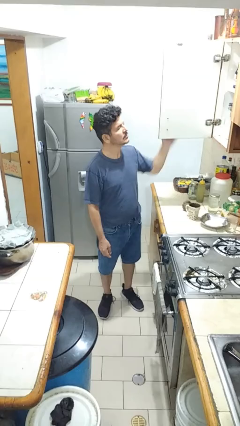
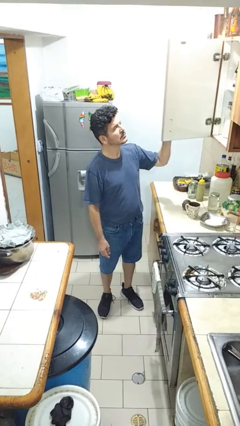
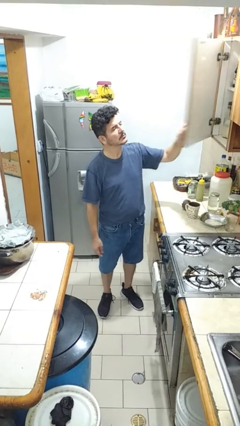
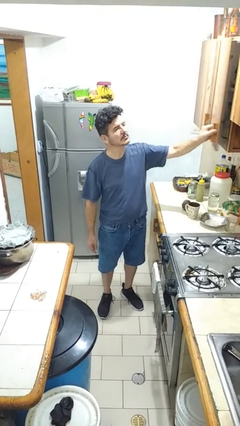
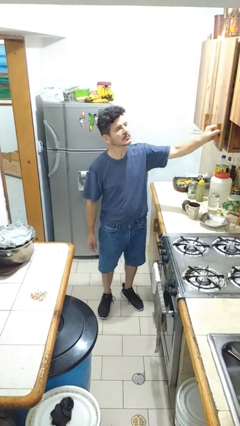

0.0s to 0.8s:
person closes cabinet

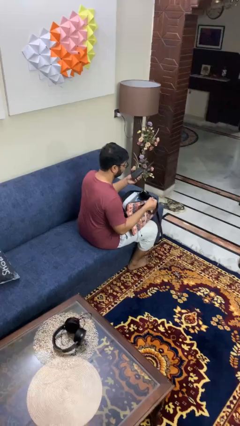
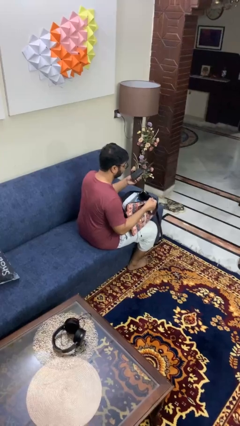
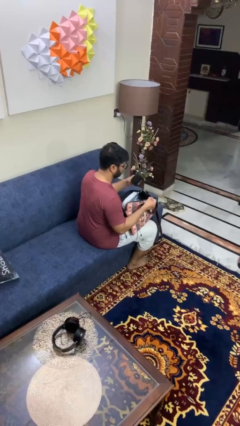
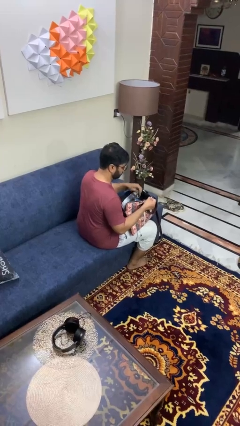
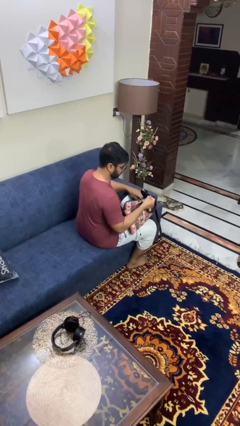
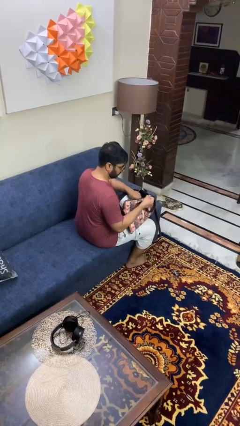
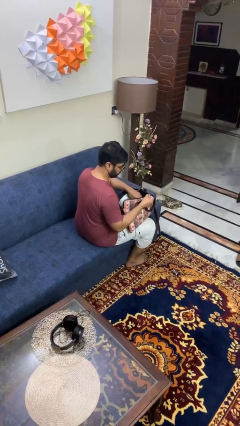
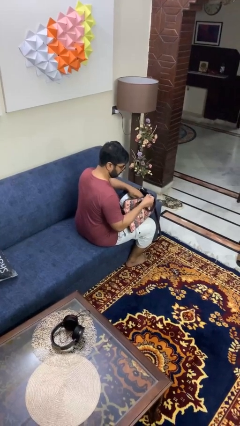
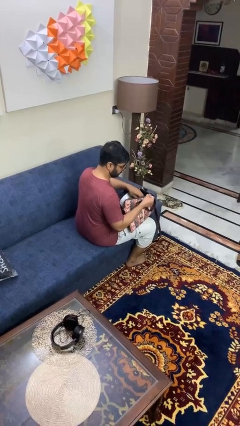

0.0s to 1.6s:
person puts object into purse

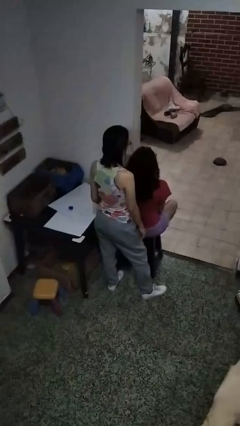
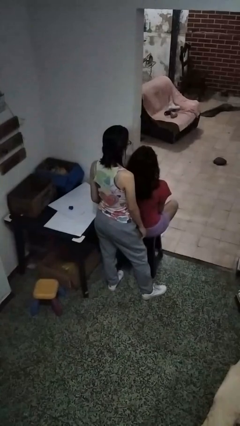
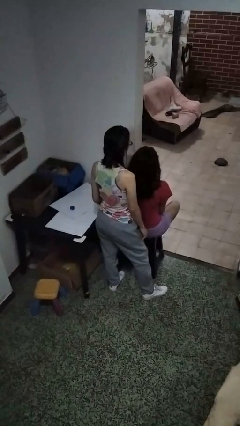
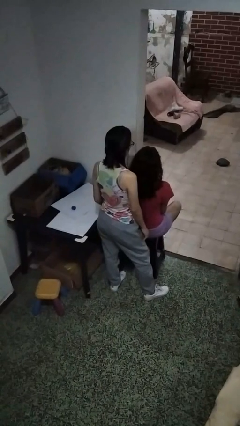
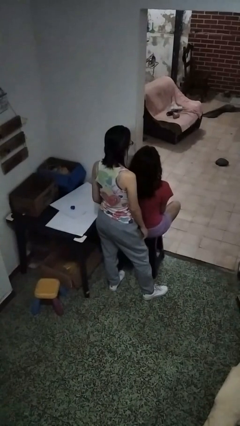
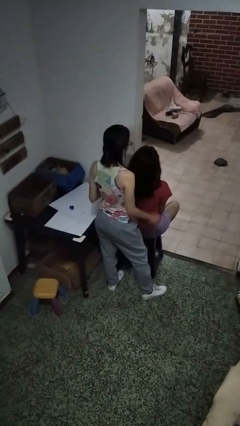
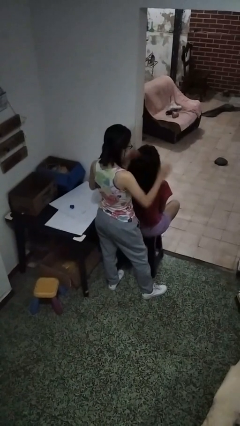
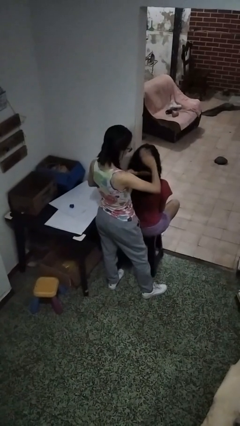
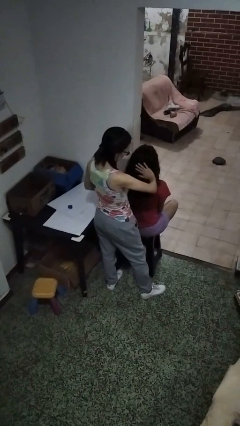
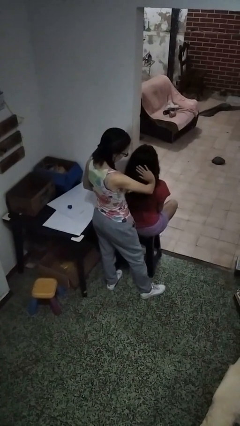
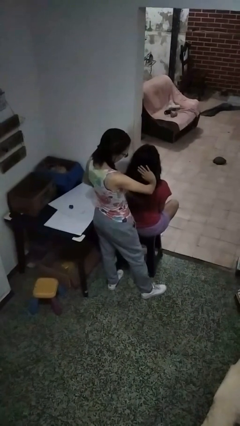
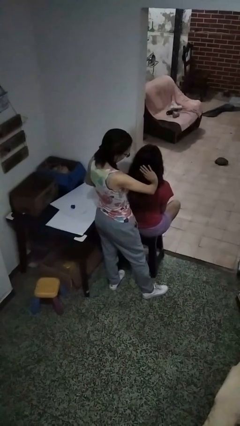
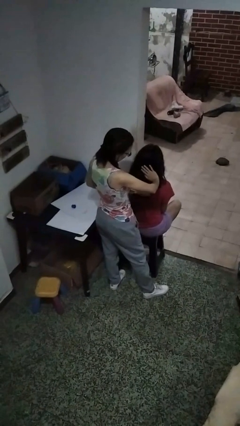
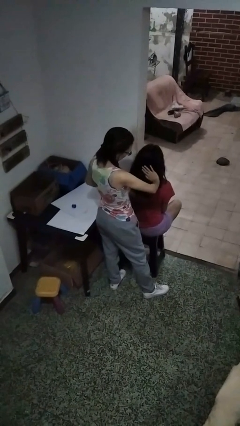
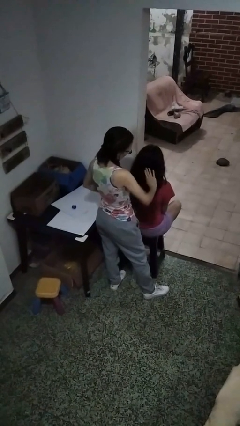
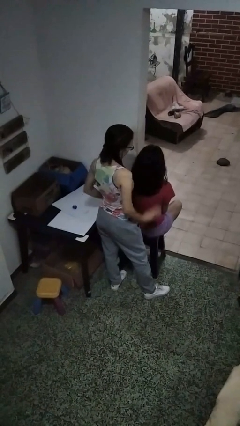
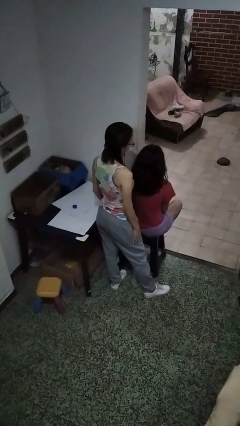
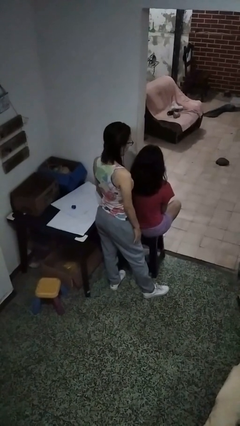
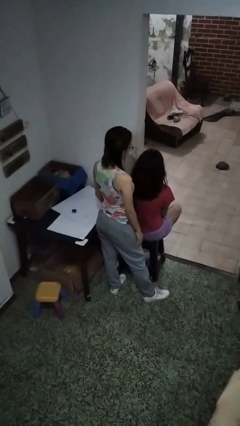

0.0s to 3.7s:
person brushes hair of person

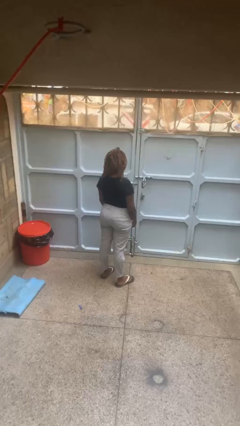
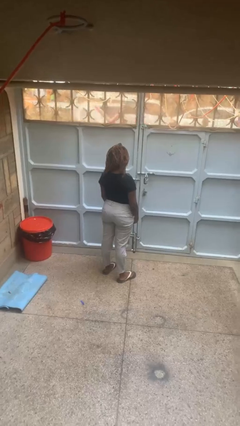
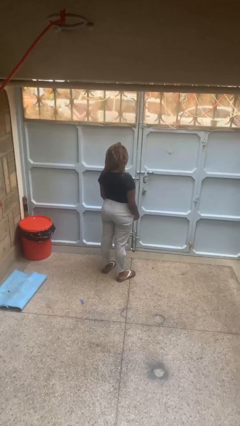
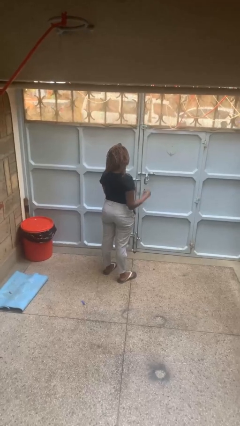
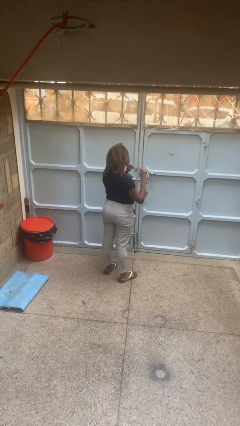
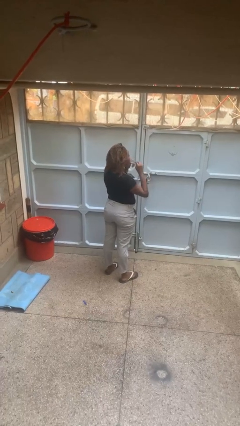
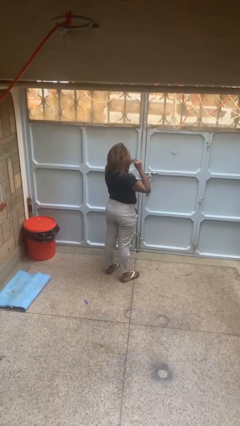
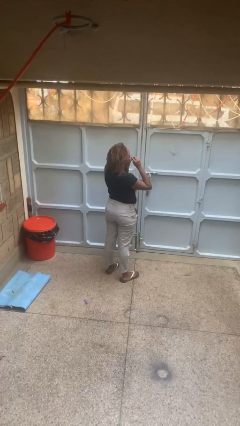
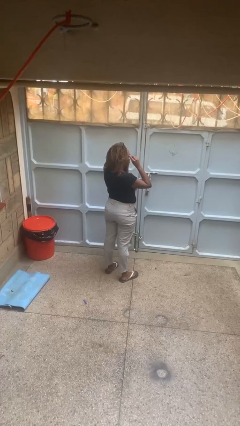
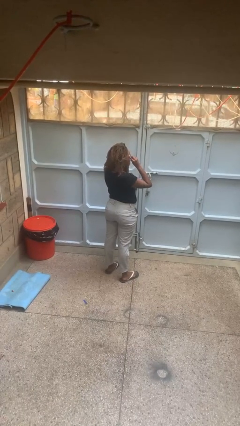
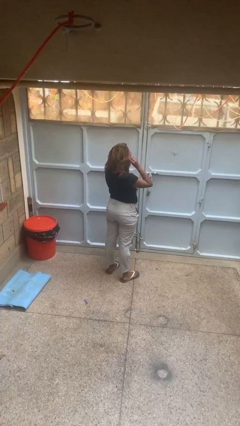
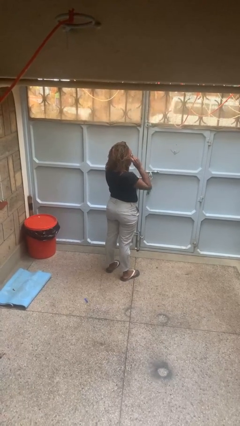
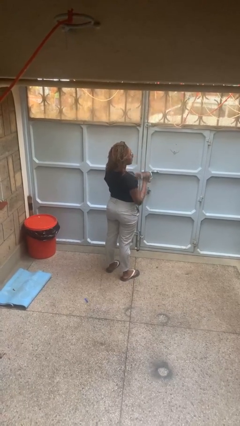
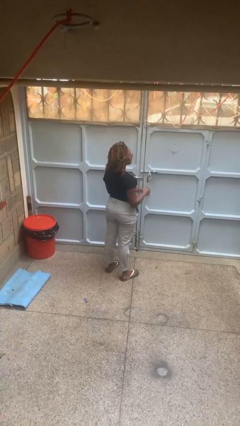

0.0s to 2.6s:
person puts on glasses

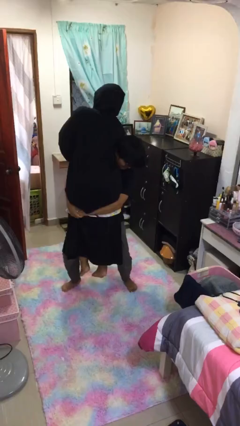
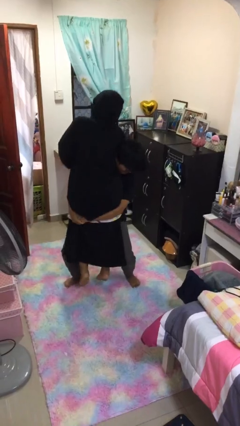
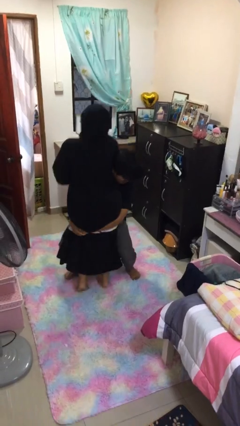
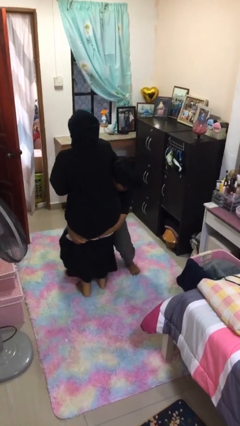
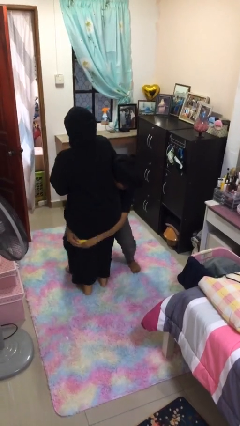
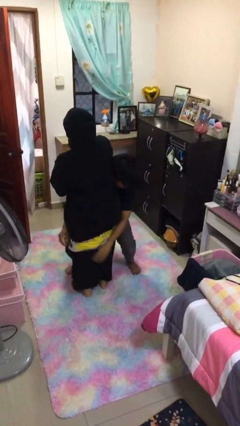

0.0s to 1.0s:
person puts down person

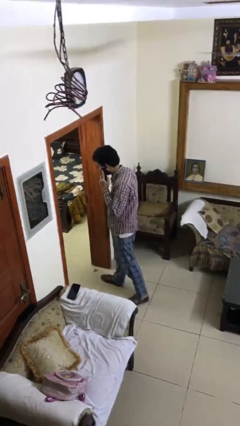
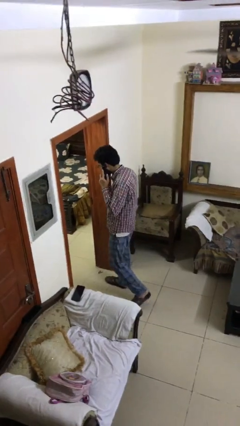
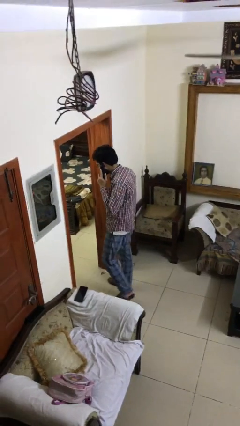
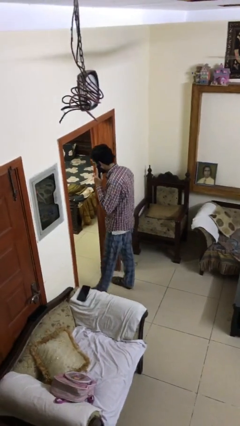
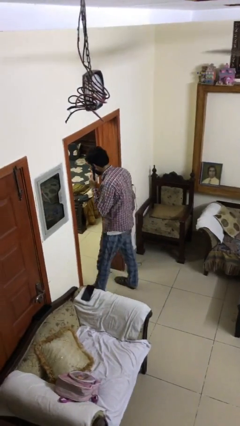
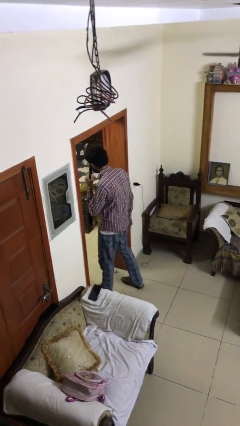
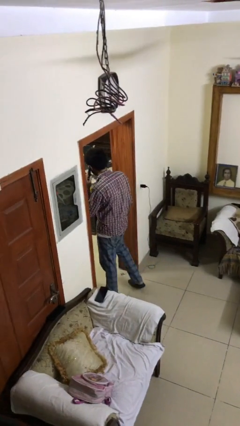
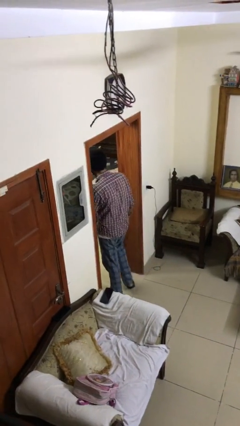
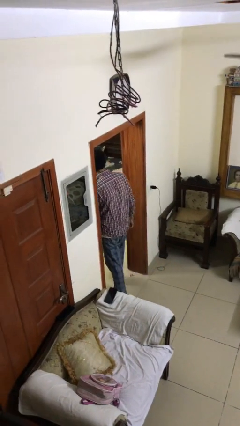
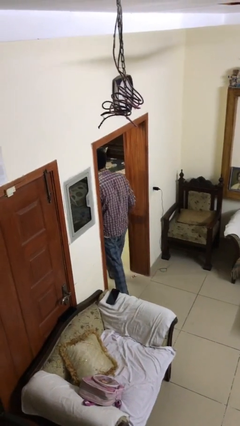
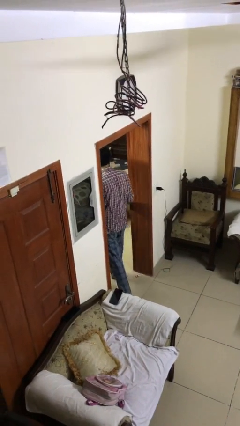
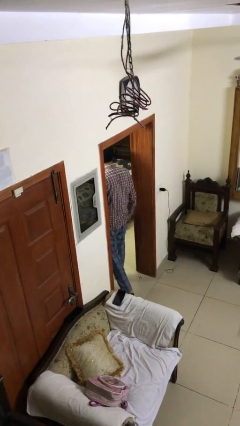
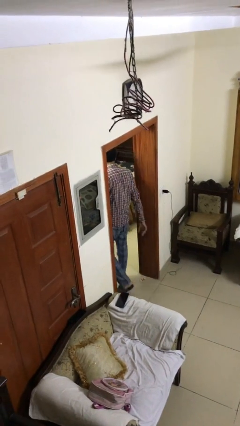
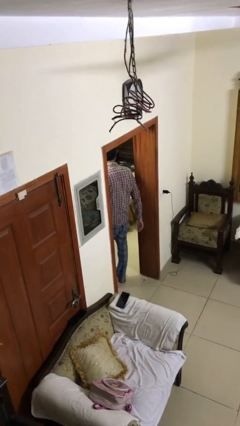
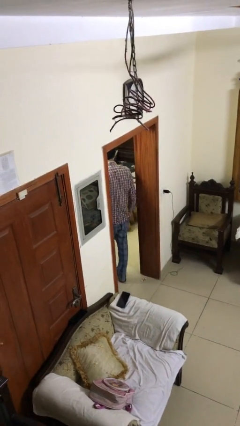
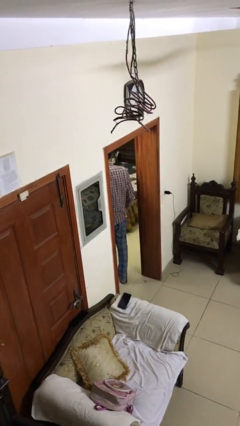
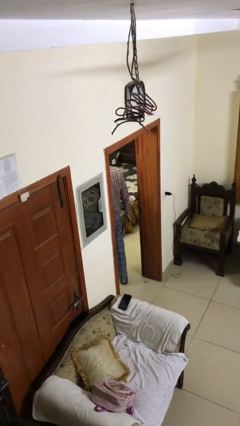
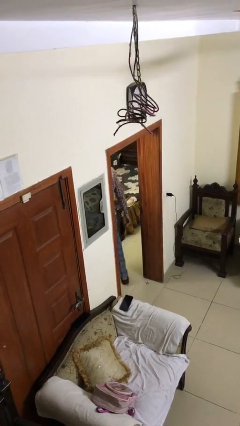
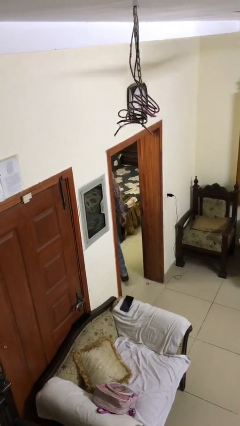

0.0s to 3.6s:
person exits scene through structure

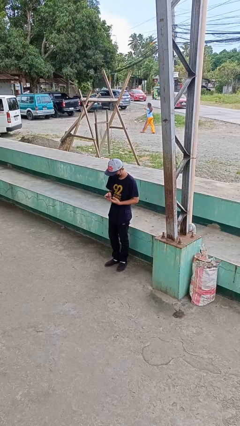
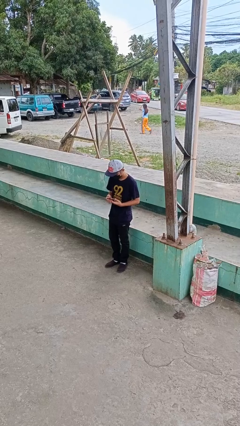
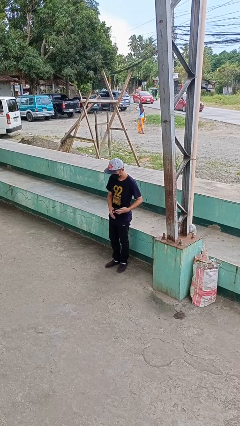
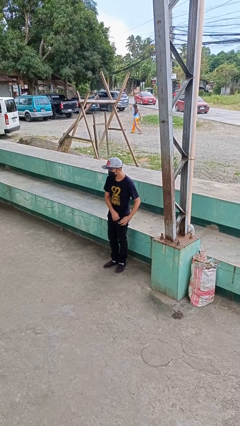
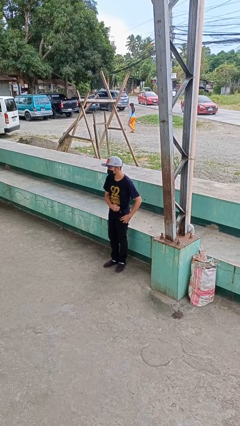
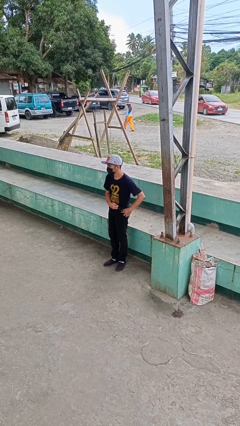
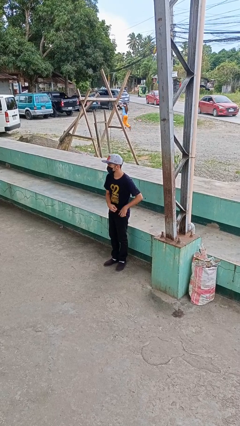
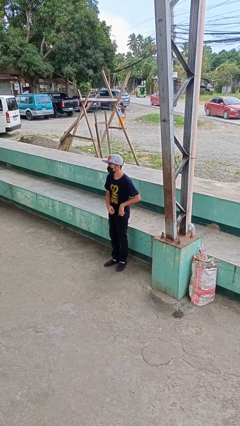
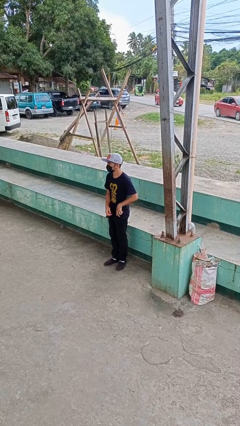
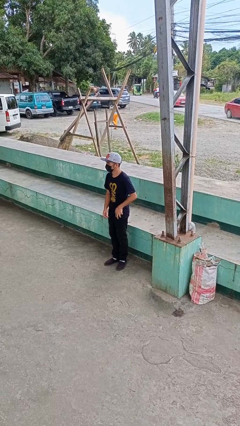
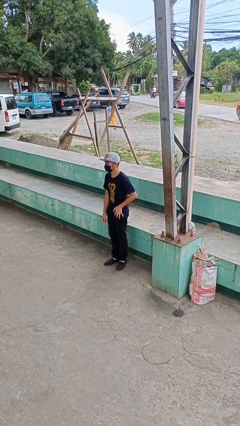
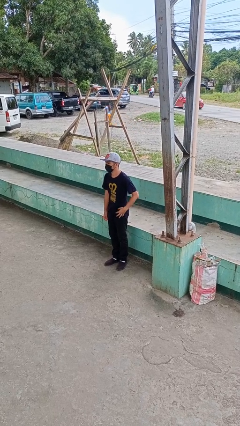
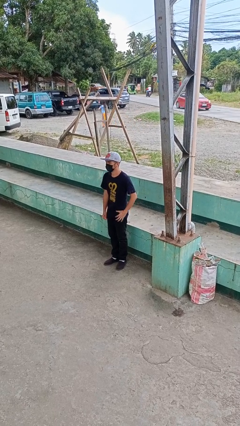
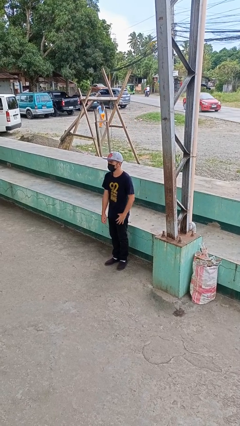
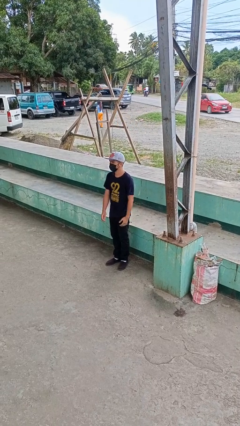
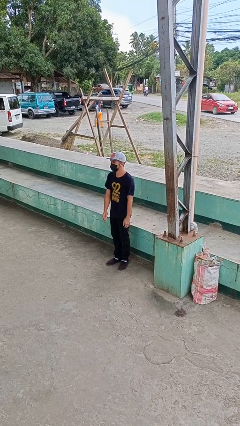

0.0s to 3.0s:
person puts phone into pocket

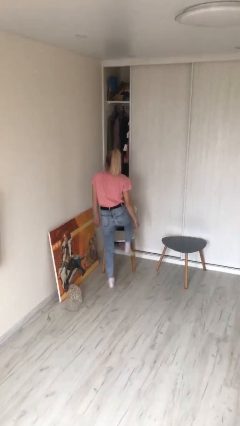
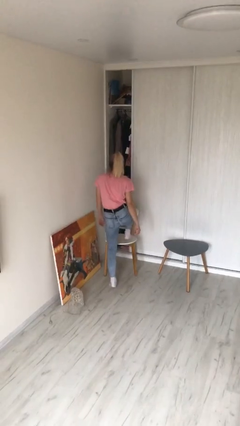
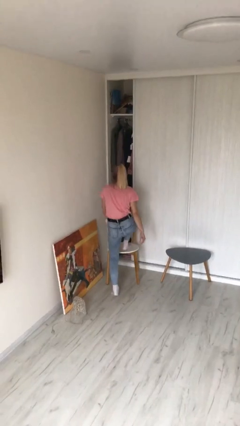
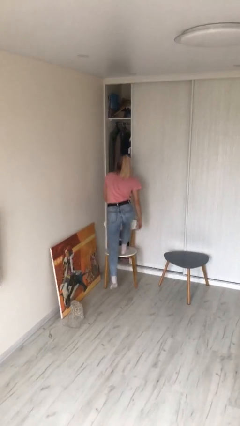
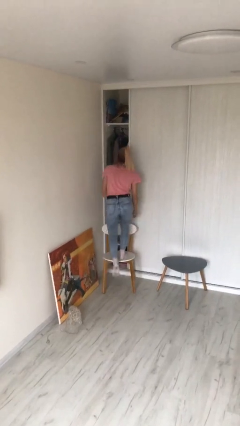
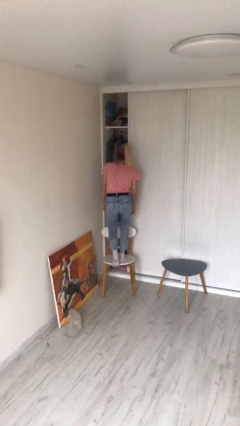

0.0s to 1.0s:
person climbs on chair
